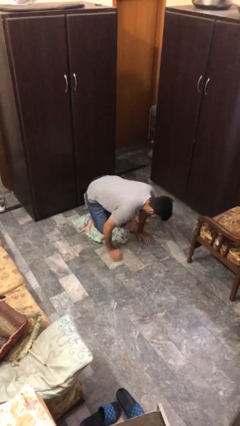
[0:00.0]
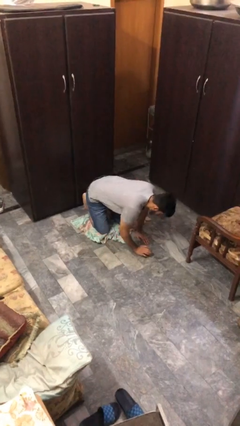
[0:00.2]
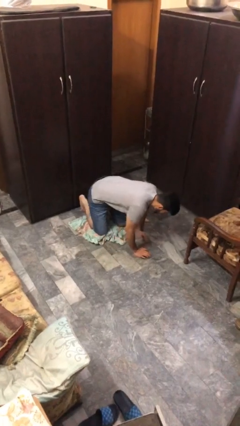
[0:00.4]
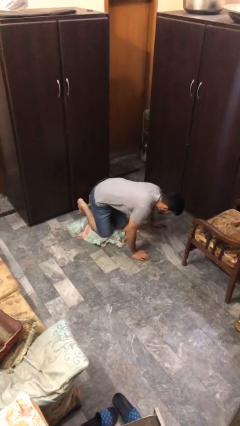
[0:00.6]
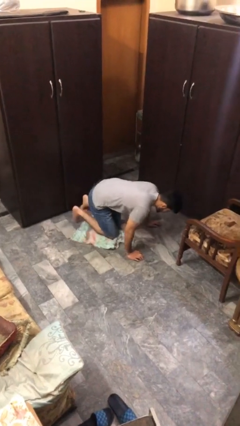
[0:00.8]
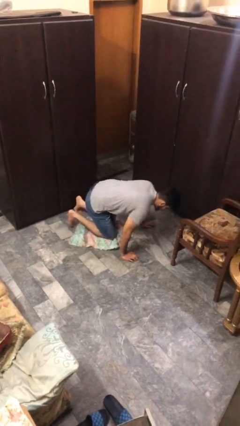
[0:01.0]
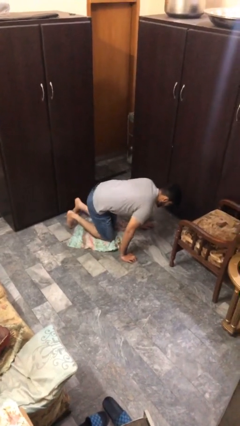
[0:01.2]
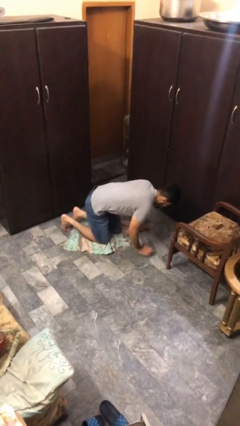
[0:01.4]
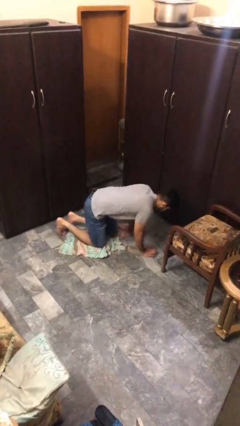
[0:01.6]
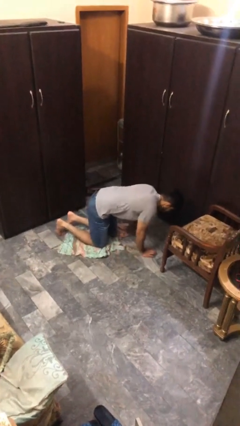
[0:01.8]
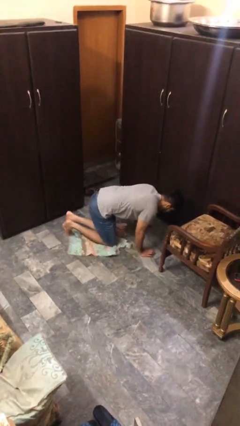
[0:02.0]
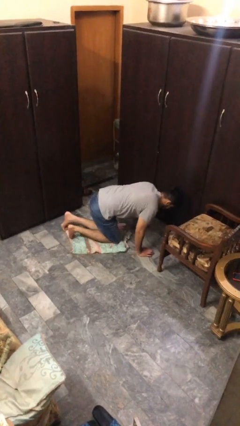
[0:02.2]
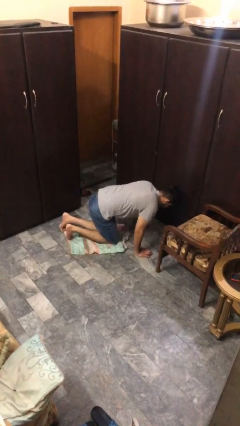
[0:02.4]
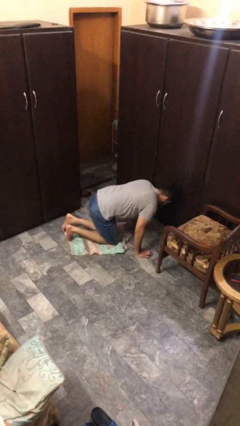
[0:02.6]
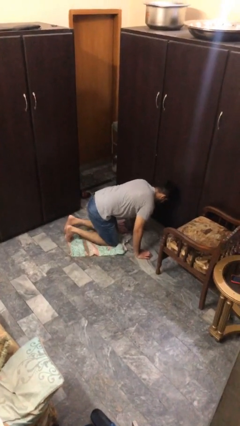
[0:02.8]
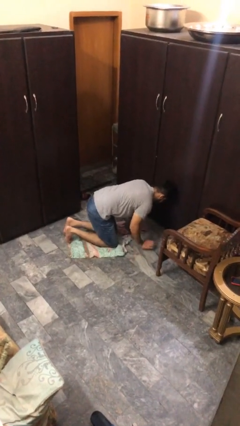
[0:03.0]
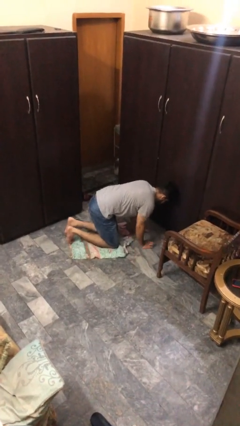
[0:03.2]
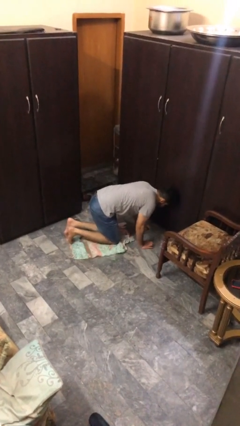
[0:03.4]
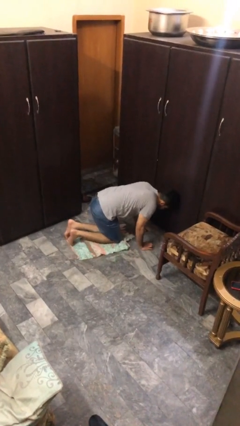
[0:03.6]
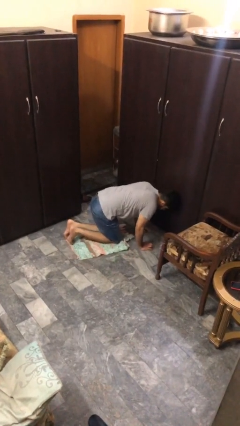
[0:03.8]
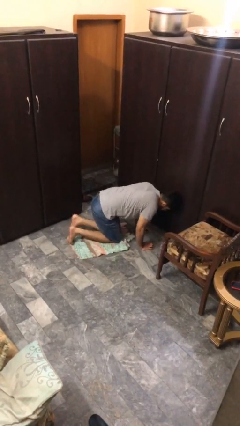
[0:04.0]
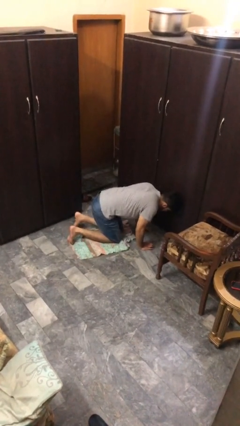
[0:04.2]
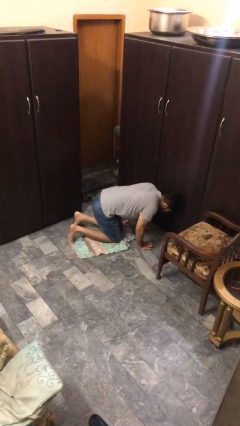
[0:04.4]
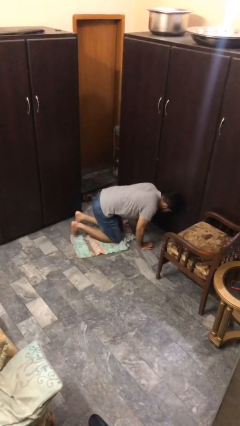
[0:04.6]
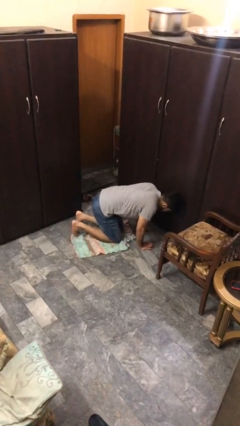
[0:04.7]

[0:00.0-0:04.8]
person crawls

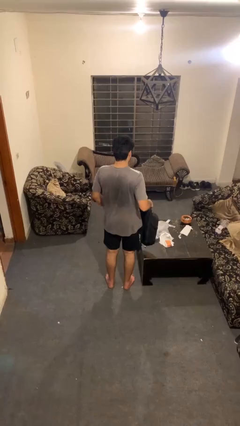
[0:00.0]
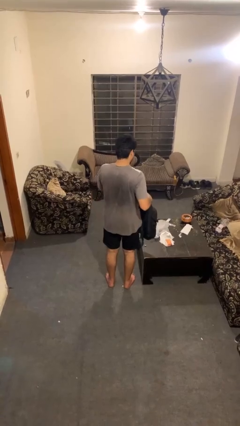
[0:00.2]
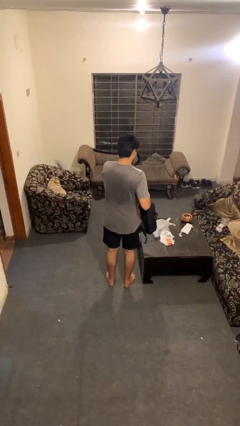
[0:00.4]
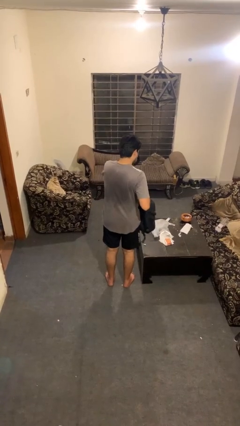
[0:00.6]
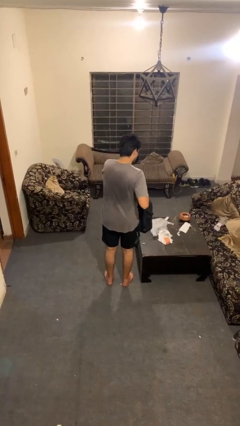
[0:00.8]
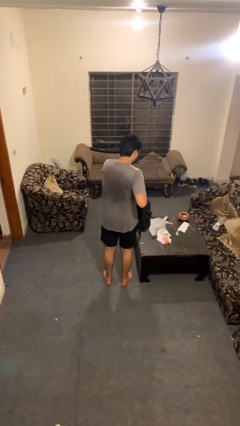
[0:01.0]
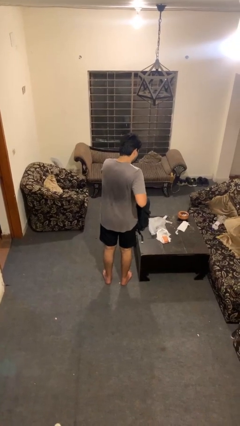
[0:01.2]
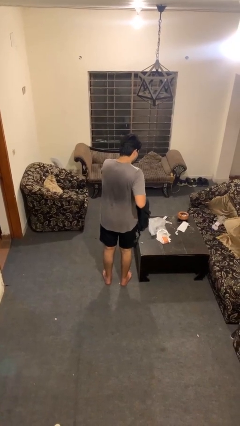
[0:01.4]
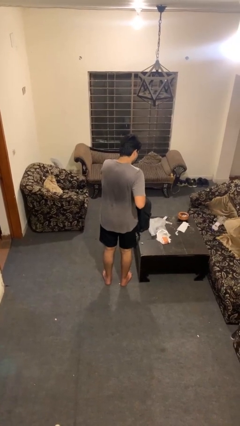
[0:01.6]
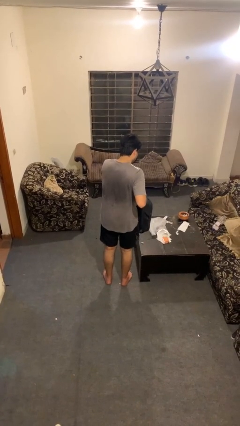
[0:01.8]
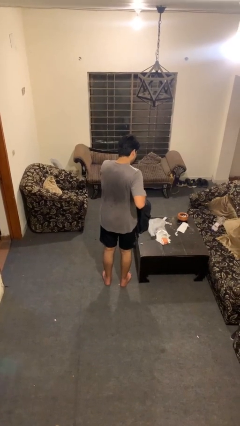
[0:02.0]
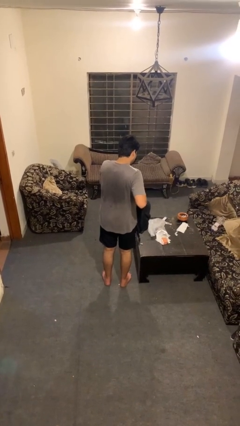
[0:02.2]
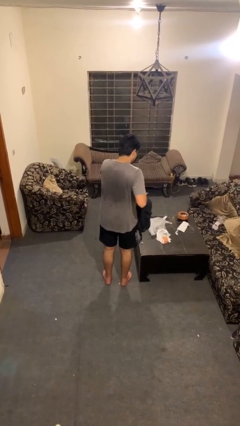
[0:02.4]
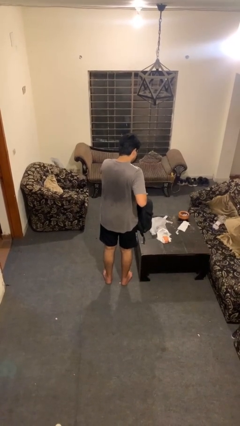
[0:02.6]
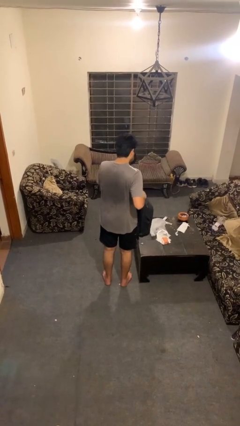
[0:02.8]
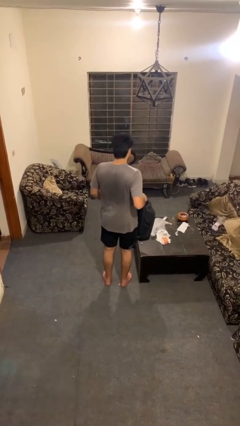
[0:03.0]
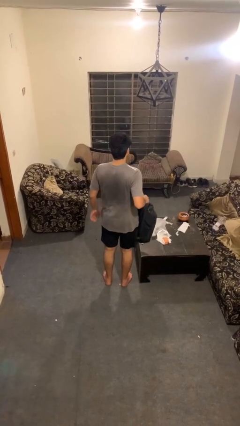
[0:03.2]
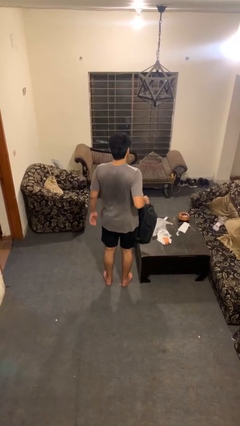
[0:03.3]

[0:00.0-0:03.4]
person searches in bag

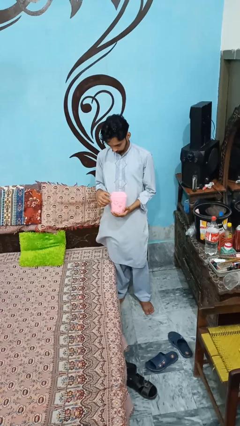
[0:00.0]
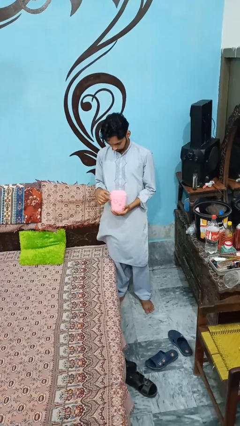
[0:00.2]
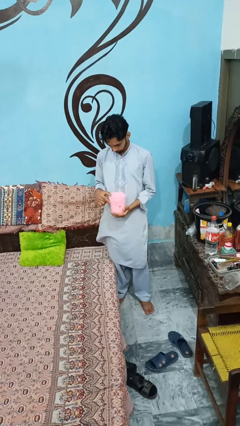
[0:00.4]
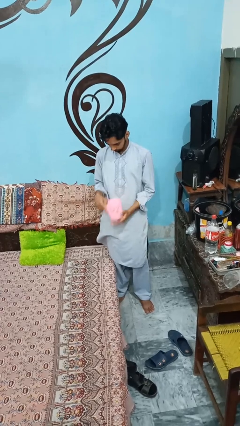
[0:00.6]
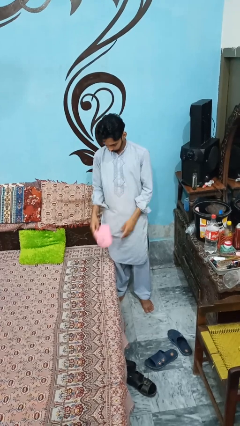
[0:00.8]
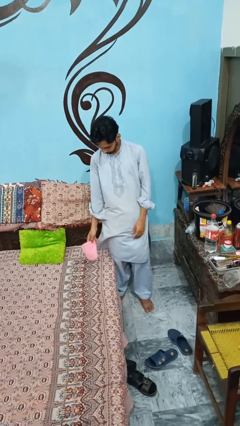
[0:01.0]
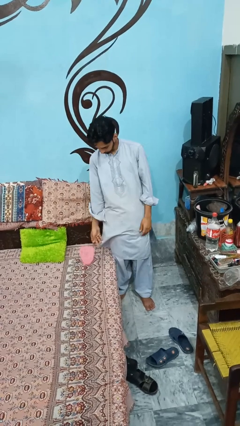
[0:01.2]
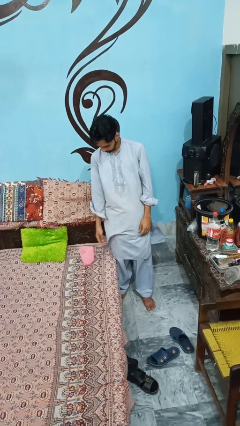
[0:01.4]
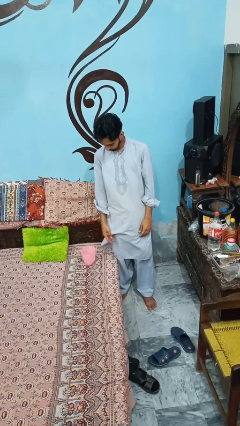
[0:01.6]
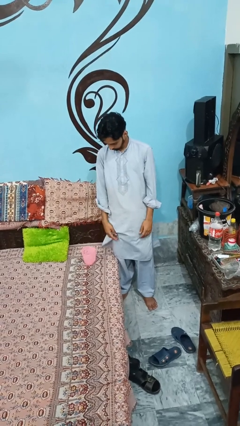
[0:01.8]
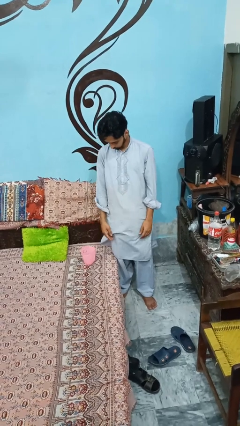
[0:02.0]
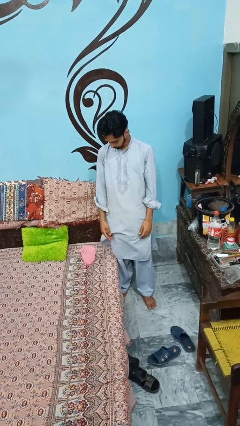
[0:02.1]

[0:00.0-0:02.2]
person puts down object on couch

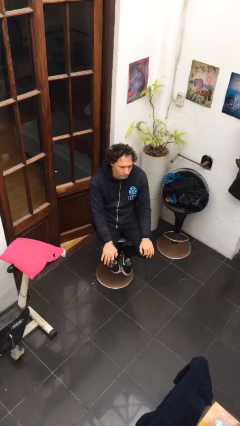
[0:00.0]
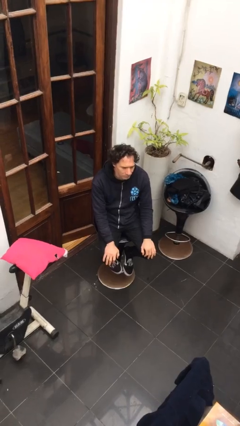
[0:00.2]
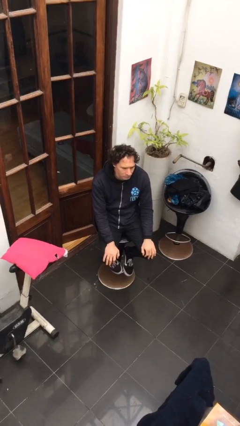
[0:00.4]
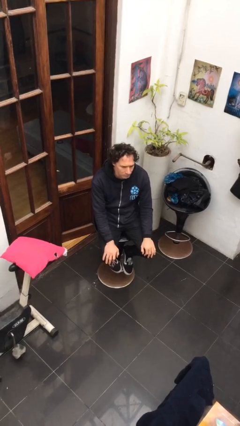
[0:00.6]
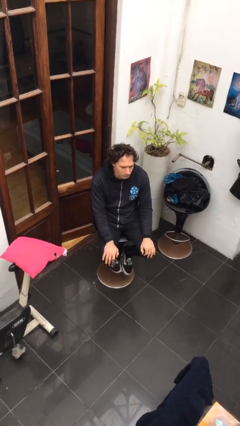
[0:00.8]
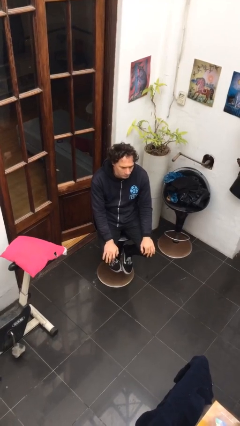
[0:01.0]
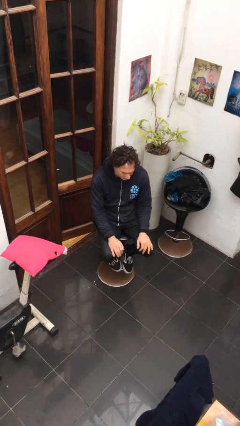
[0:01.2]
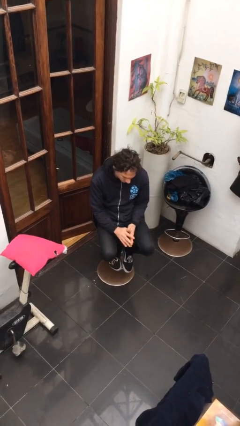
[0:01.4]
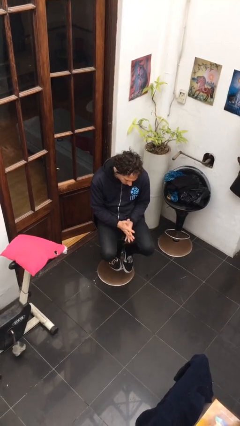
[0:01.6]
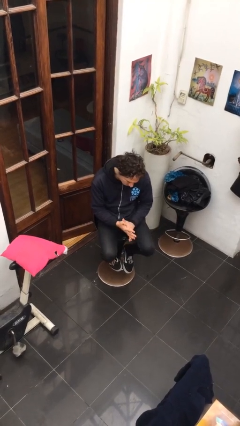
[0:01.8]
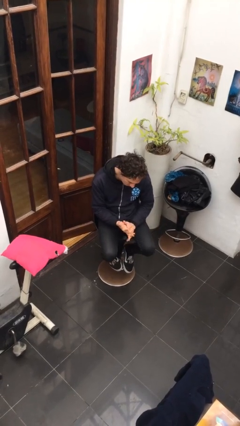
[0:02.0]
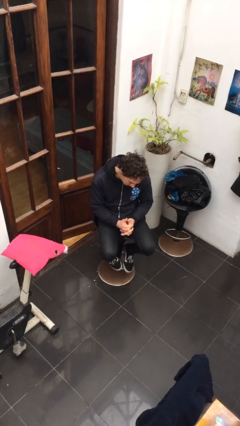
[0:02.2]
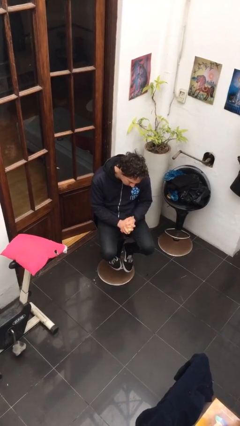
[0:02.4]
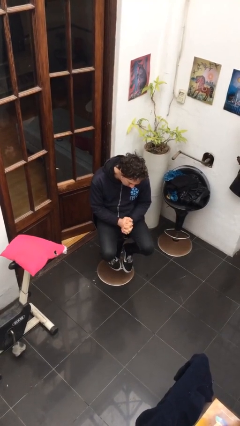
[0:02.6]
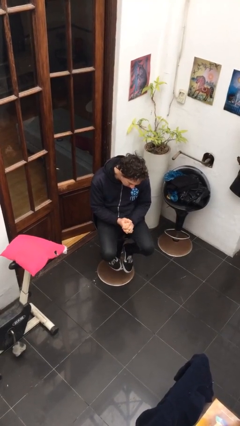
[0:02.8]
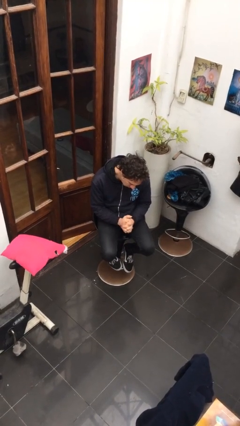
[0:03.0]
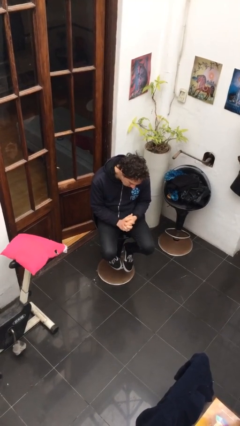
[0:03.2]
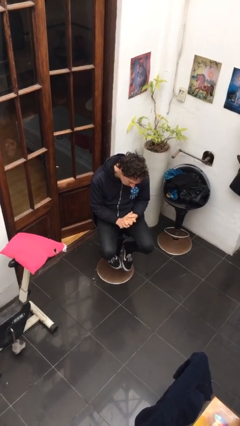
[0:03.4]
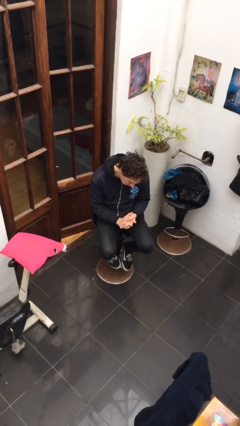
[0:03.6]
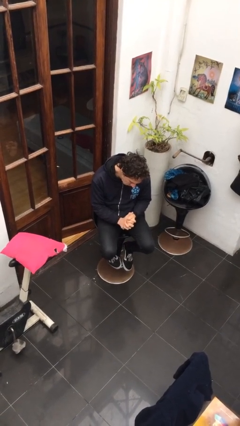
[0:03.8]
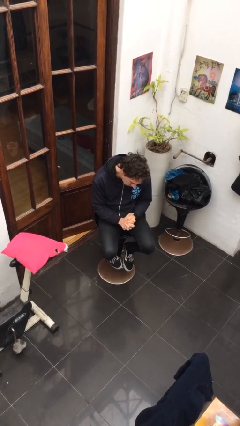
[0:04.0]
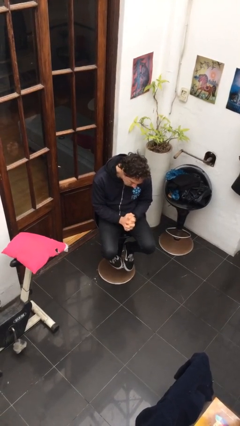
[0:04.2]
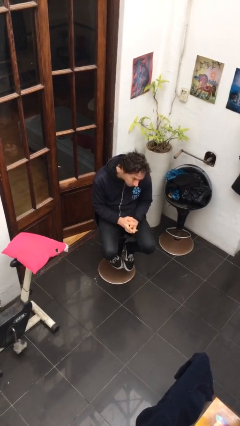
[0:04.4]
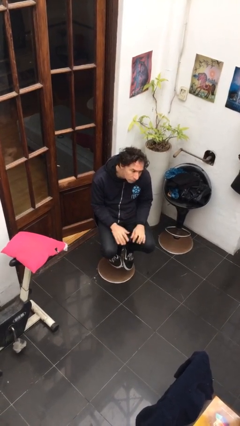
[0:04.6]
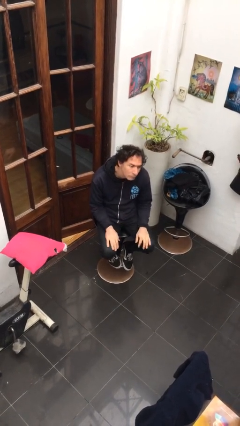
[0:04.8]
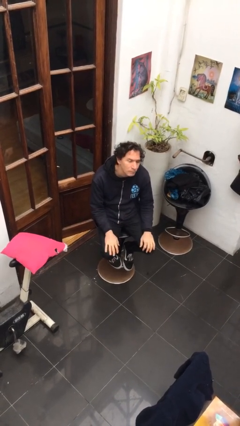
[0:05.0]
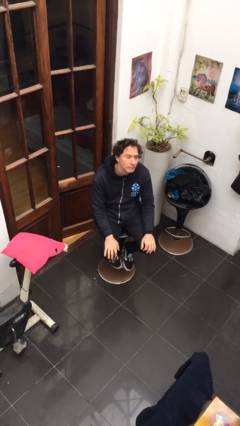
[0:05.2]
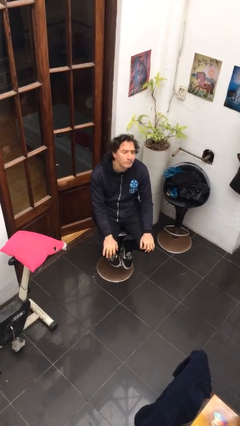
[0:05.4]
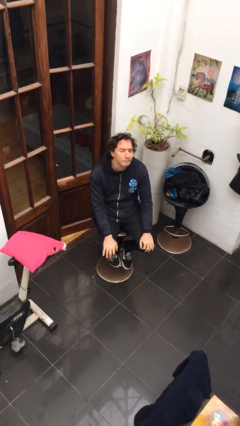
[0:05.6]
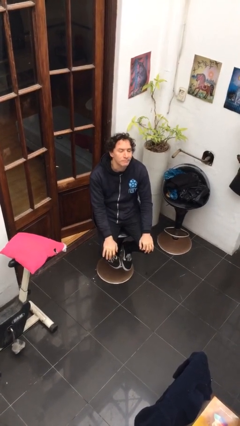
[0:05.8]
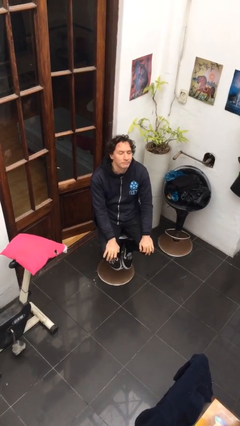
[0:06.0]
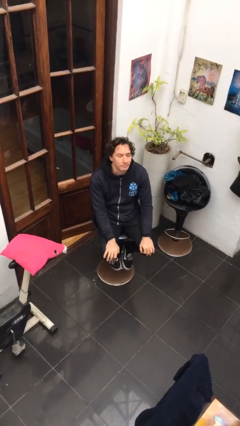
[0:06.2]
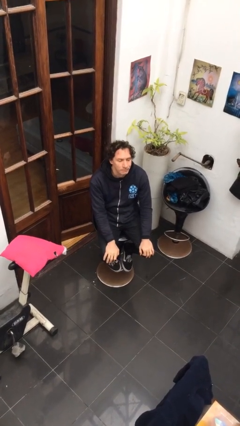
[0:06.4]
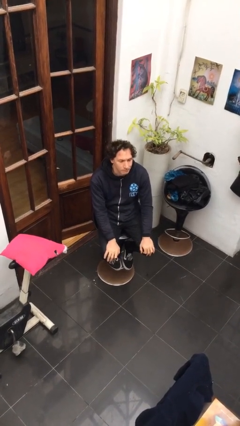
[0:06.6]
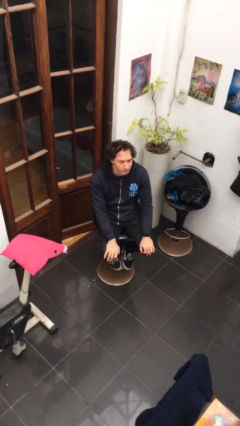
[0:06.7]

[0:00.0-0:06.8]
person looks at hands in lap

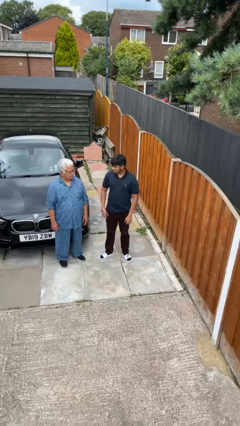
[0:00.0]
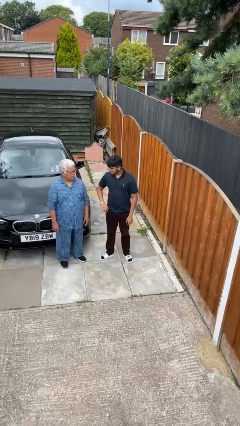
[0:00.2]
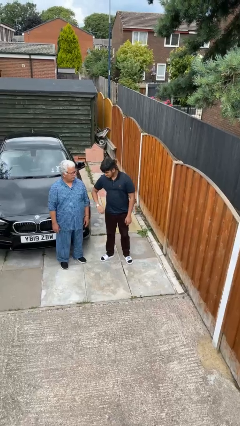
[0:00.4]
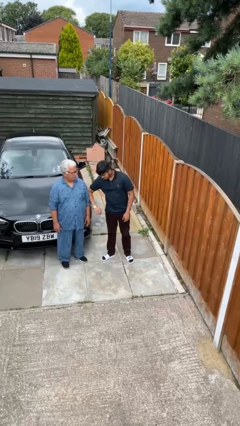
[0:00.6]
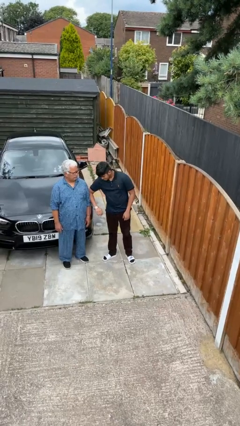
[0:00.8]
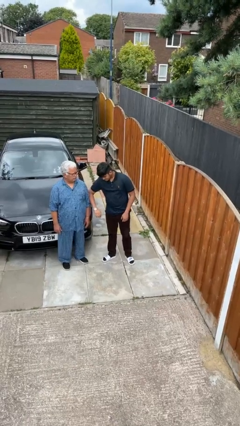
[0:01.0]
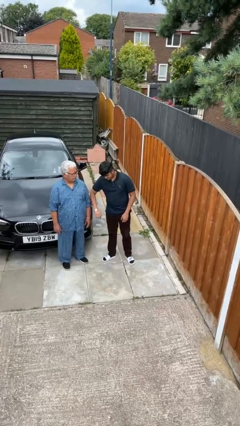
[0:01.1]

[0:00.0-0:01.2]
person nudges person with elbow
